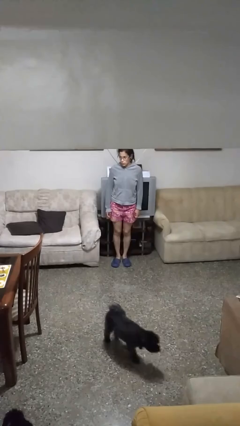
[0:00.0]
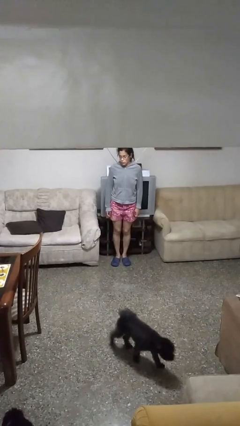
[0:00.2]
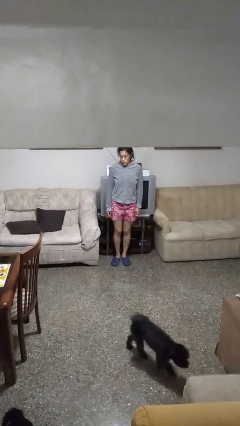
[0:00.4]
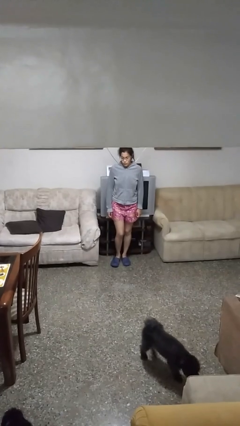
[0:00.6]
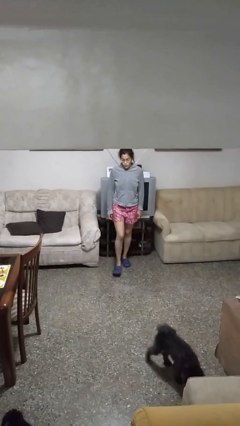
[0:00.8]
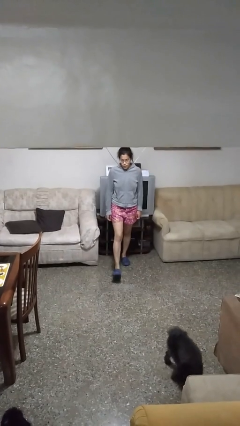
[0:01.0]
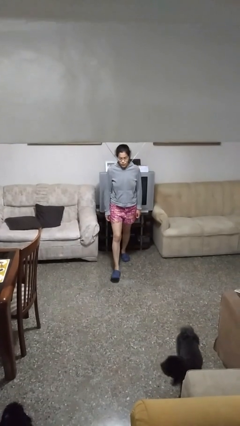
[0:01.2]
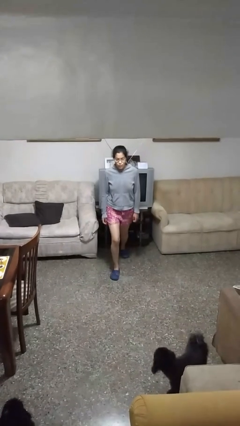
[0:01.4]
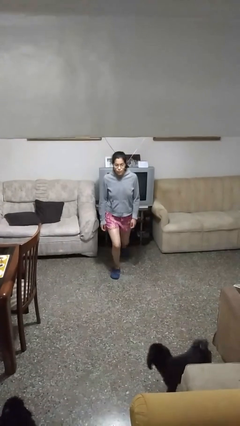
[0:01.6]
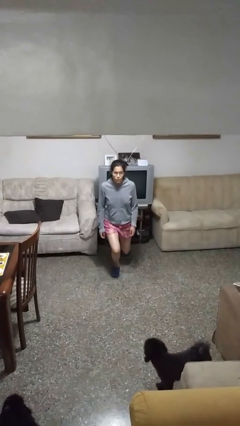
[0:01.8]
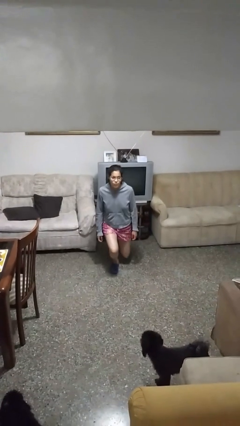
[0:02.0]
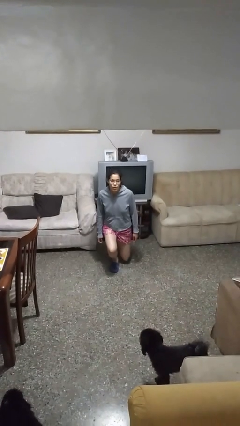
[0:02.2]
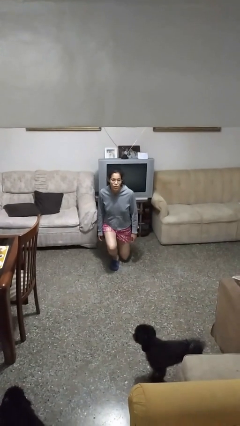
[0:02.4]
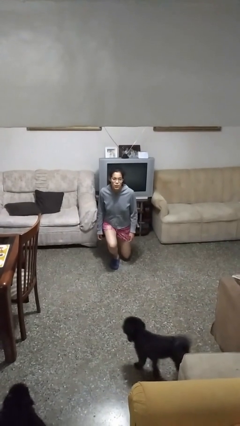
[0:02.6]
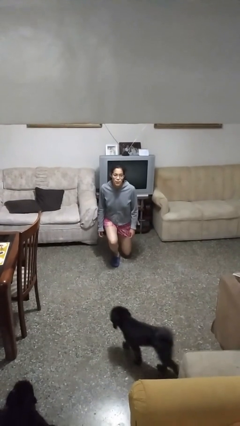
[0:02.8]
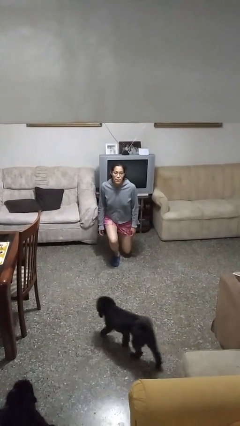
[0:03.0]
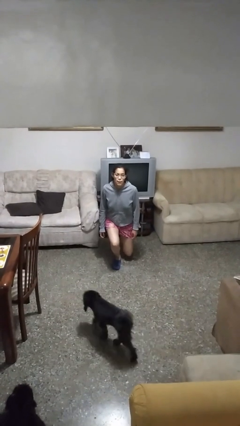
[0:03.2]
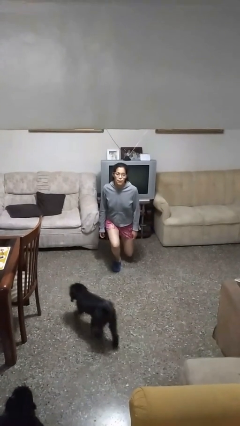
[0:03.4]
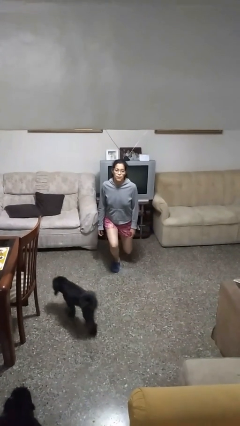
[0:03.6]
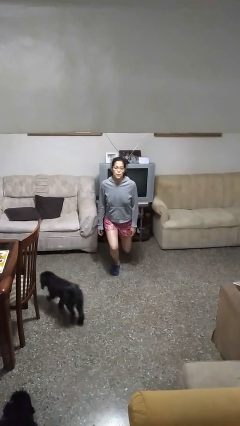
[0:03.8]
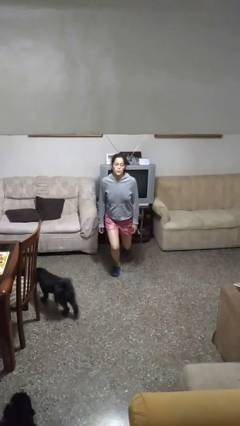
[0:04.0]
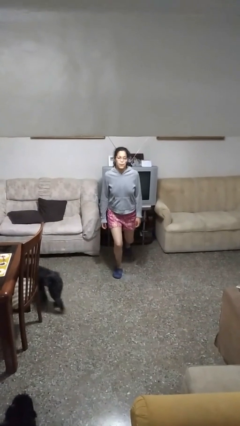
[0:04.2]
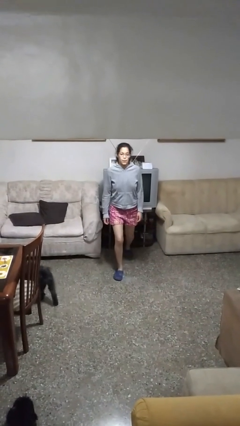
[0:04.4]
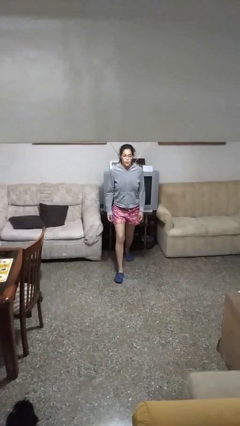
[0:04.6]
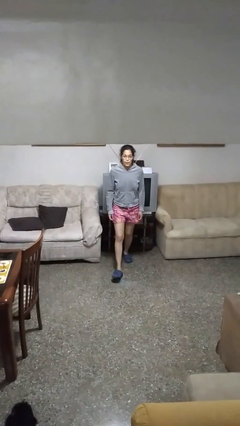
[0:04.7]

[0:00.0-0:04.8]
person exercises with lunges

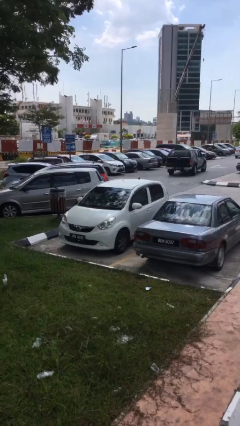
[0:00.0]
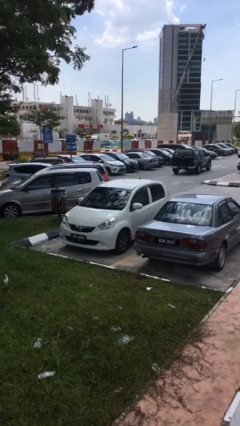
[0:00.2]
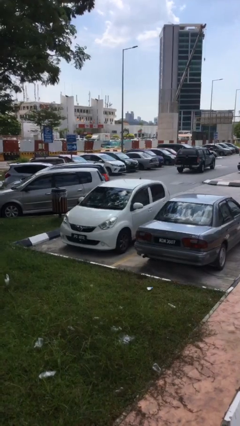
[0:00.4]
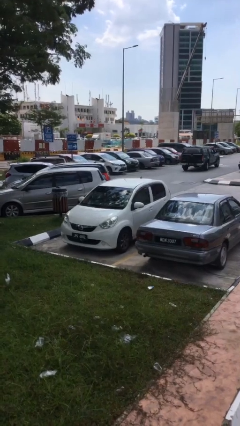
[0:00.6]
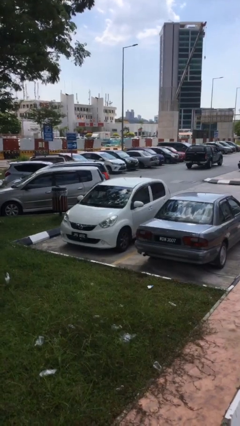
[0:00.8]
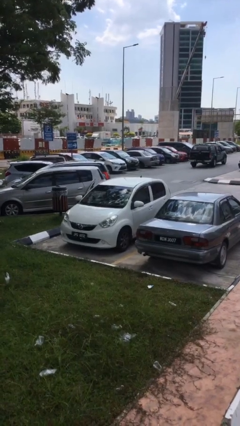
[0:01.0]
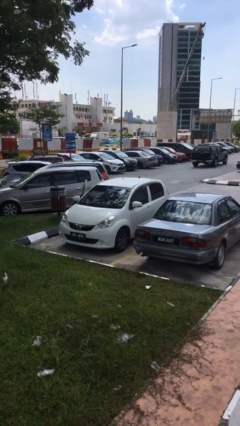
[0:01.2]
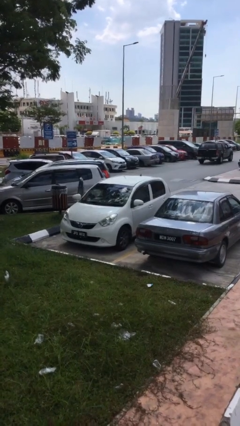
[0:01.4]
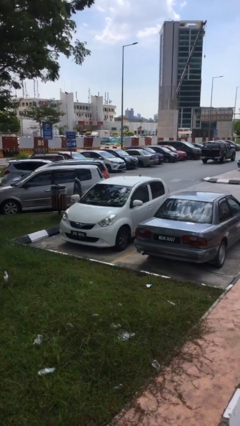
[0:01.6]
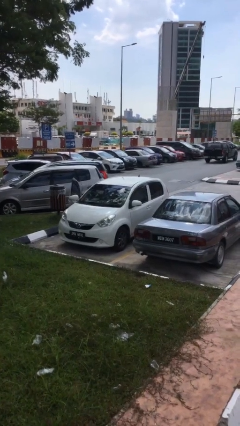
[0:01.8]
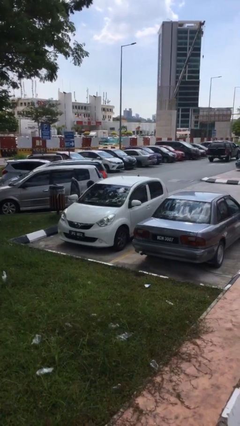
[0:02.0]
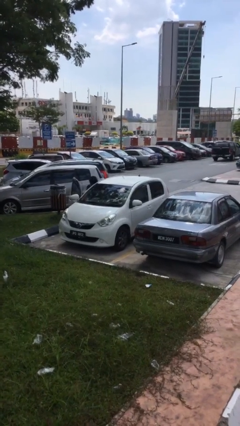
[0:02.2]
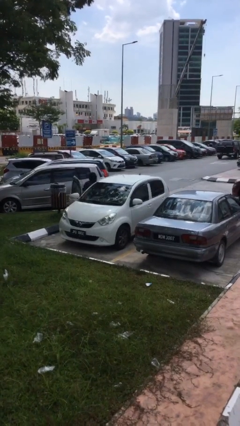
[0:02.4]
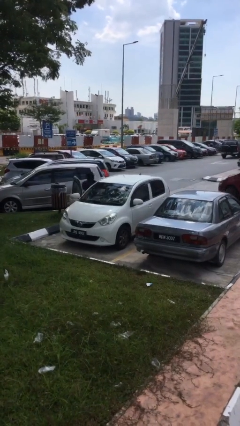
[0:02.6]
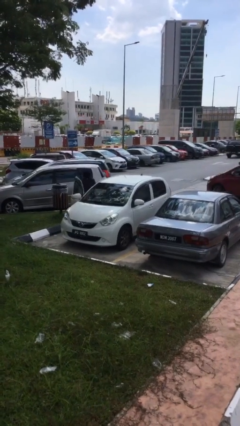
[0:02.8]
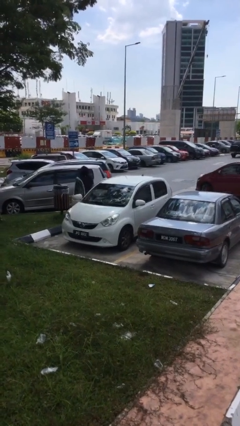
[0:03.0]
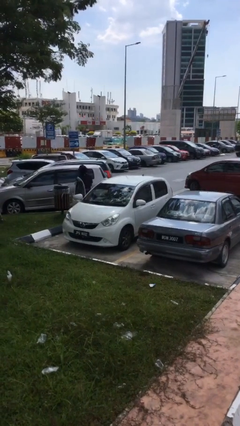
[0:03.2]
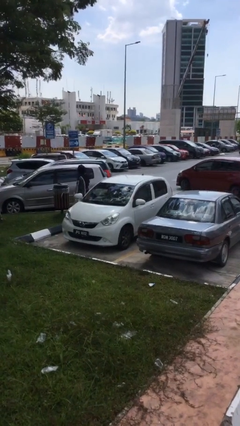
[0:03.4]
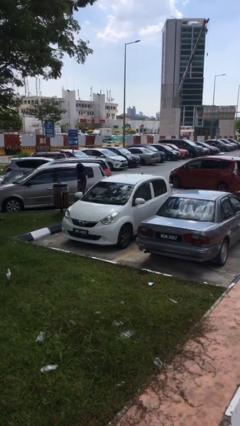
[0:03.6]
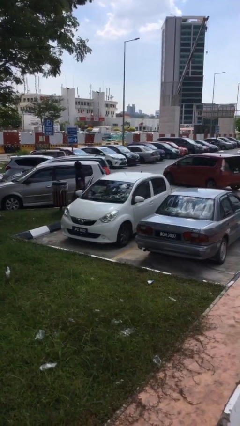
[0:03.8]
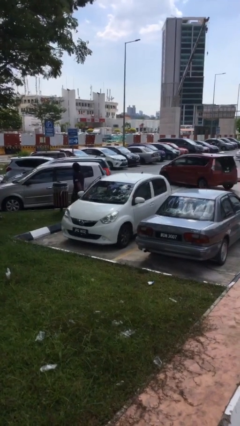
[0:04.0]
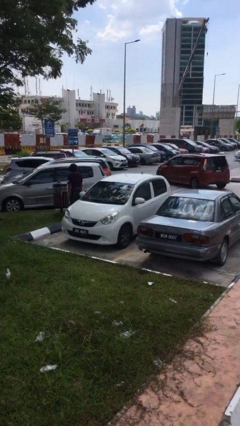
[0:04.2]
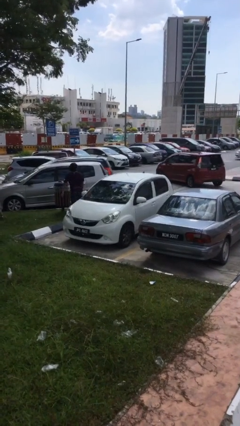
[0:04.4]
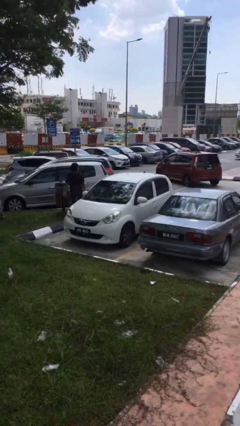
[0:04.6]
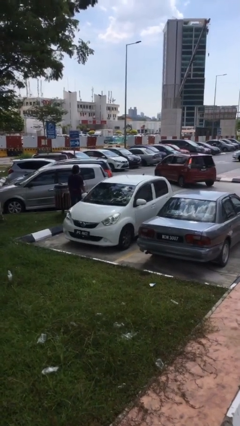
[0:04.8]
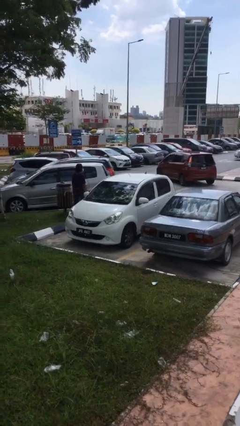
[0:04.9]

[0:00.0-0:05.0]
car drops off person

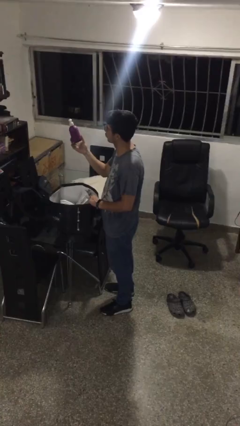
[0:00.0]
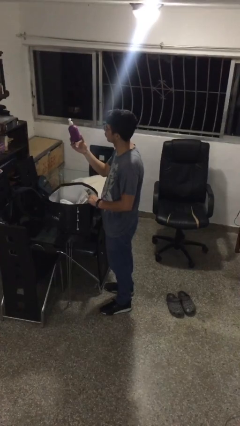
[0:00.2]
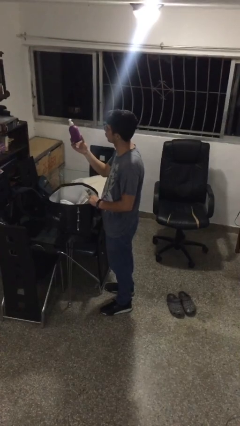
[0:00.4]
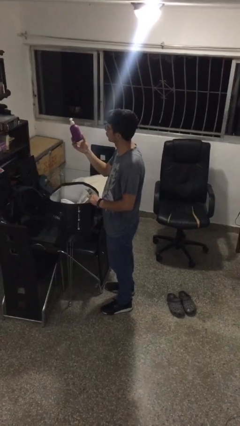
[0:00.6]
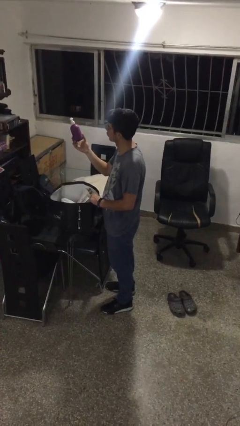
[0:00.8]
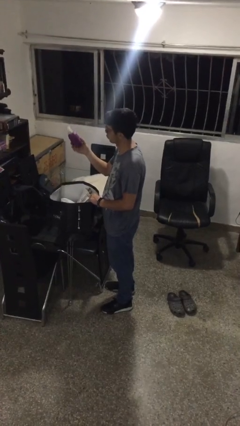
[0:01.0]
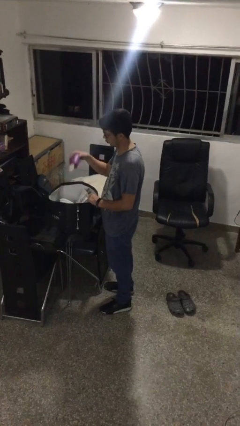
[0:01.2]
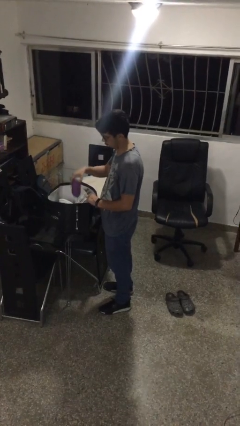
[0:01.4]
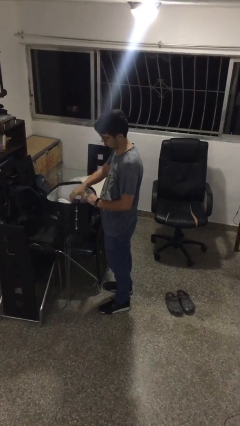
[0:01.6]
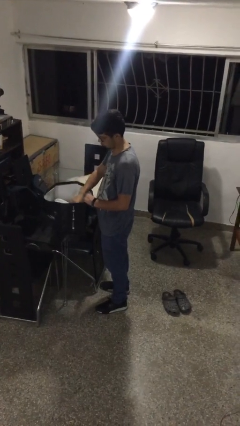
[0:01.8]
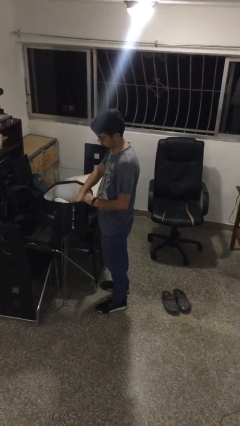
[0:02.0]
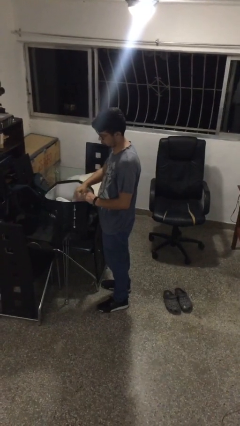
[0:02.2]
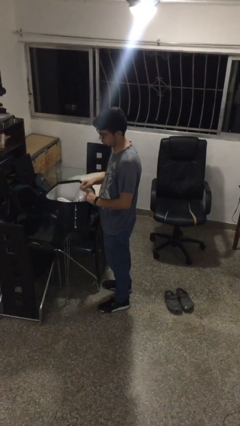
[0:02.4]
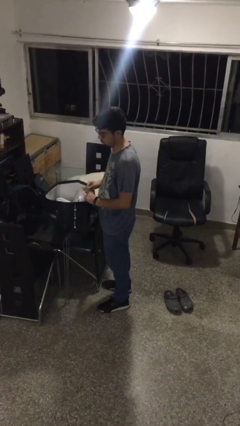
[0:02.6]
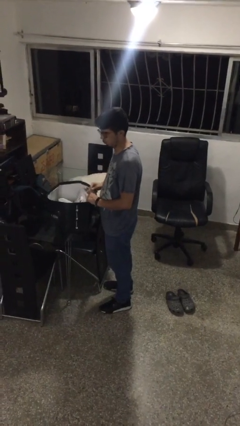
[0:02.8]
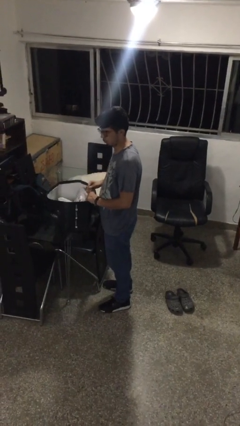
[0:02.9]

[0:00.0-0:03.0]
person puts object into bag

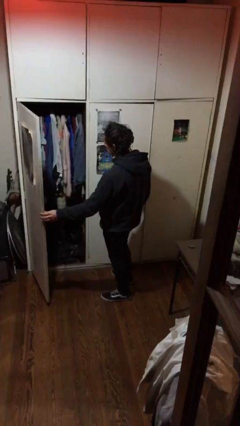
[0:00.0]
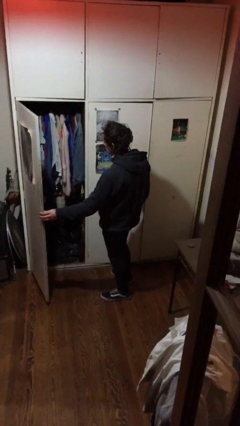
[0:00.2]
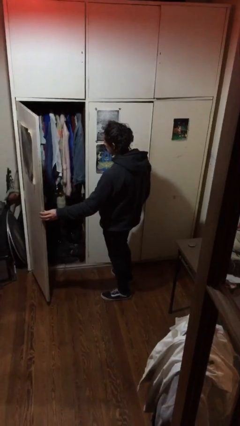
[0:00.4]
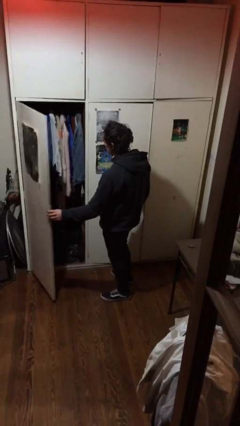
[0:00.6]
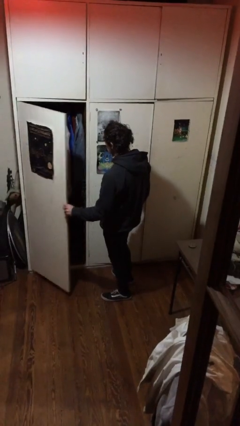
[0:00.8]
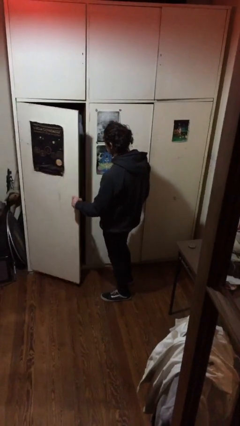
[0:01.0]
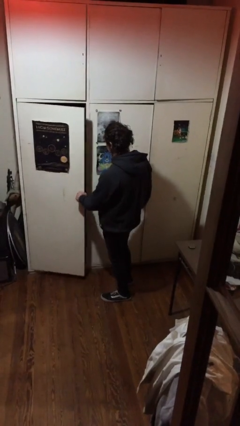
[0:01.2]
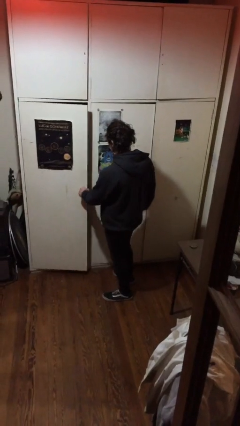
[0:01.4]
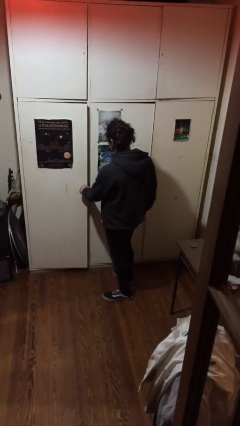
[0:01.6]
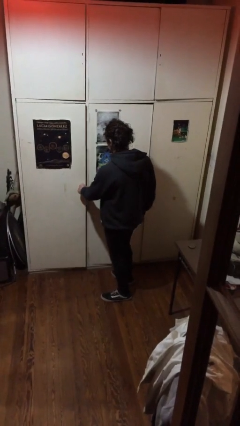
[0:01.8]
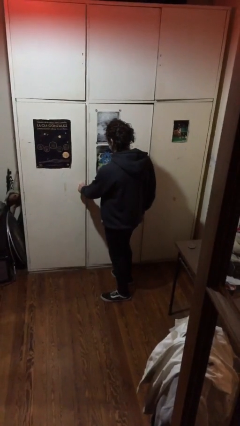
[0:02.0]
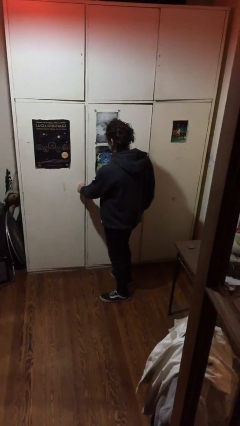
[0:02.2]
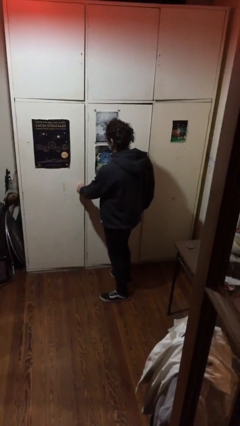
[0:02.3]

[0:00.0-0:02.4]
person closes closet door

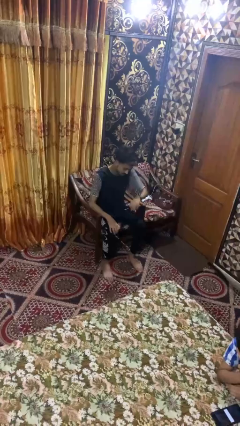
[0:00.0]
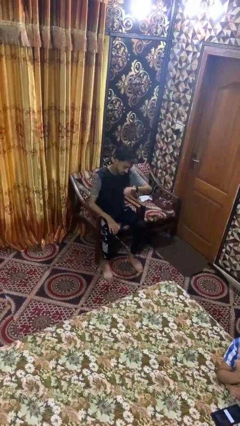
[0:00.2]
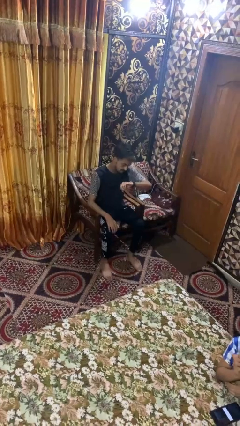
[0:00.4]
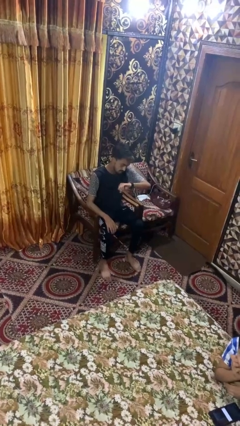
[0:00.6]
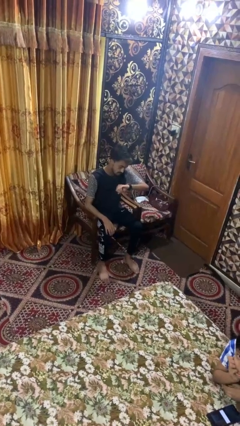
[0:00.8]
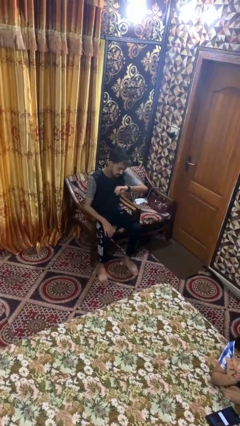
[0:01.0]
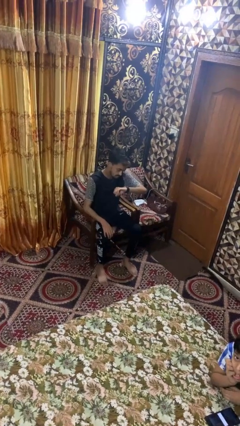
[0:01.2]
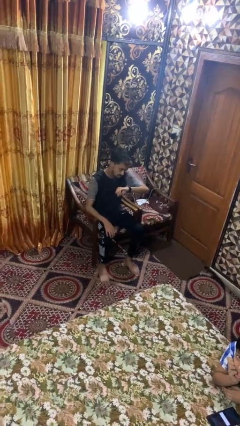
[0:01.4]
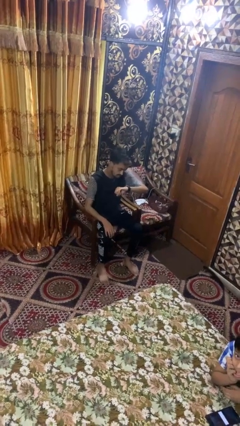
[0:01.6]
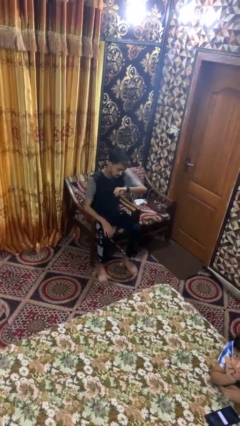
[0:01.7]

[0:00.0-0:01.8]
person looks at wristwatch

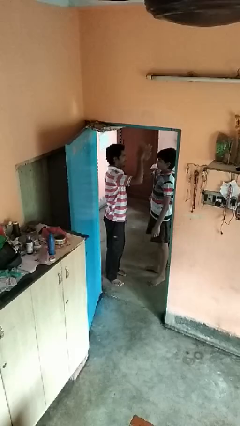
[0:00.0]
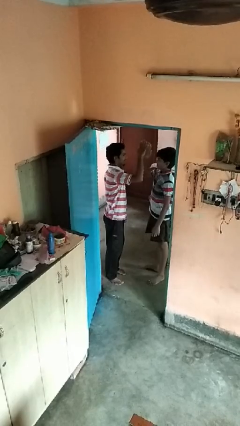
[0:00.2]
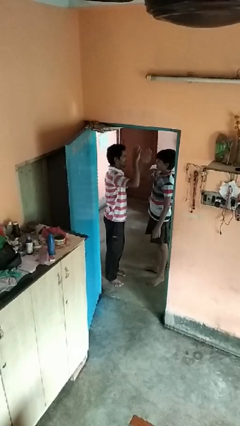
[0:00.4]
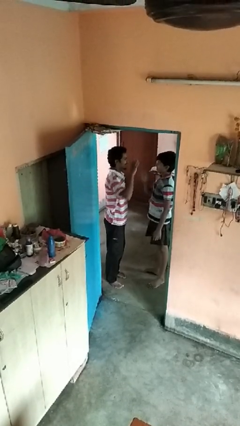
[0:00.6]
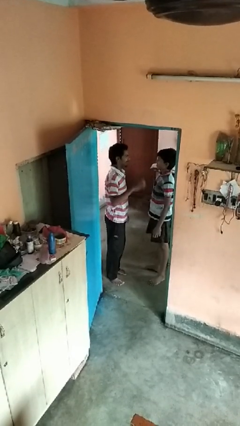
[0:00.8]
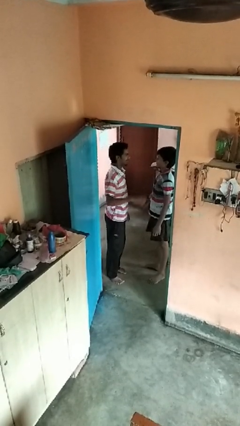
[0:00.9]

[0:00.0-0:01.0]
person highfives hand
